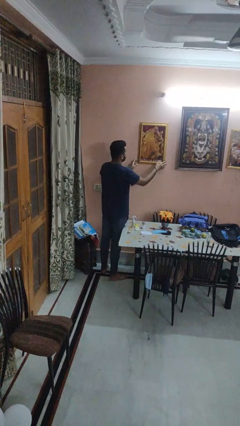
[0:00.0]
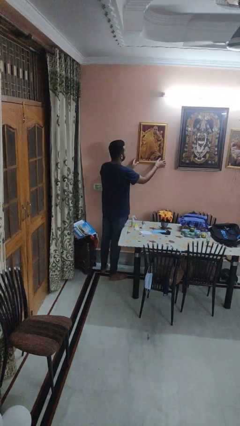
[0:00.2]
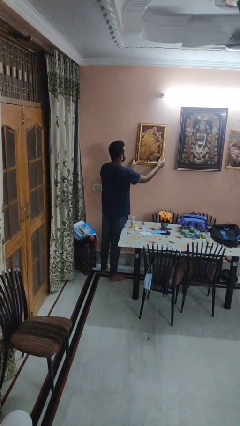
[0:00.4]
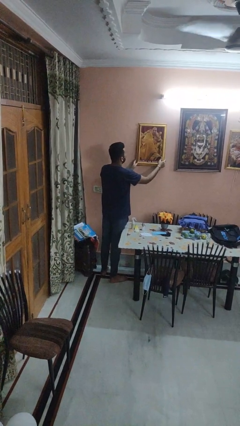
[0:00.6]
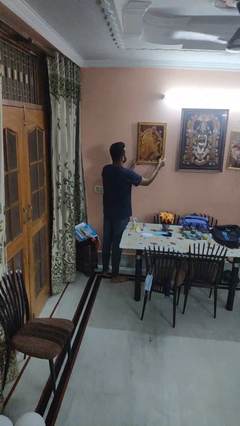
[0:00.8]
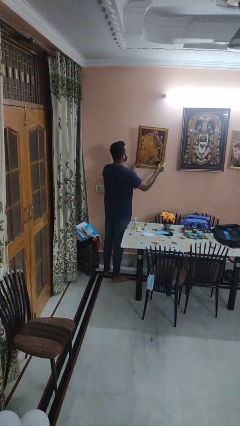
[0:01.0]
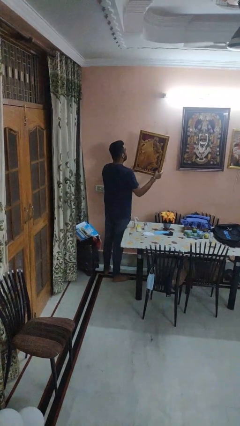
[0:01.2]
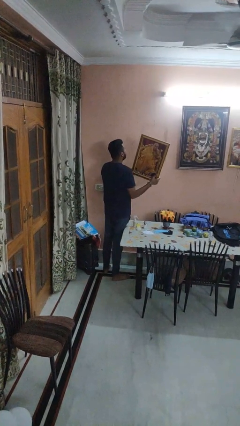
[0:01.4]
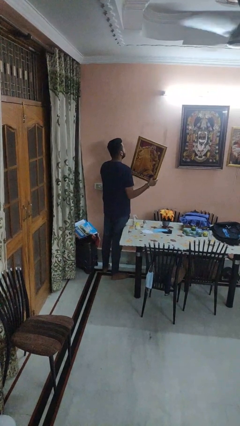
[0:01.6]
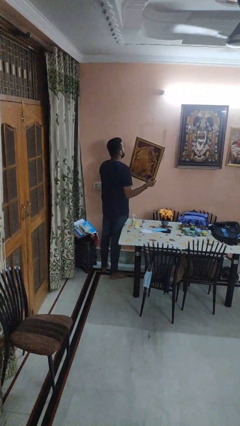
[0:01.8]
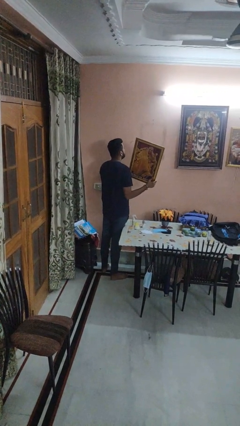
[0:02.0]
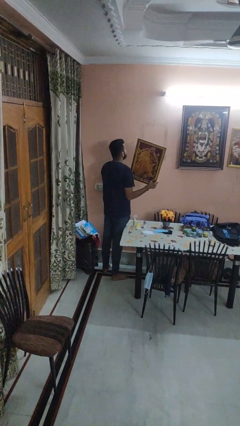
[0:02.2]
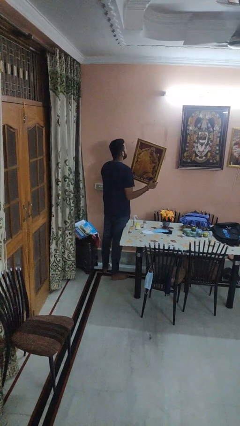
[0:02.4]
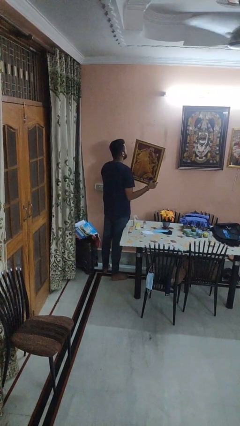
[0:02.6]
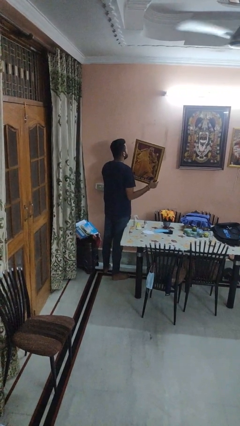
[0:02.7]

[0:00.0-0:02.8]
person takes down picture frame

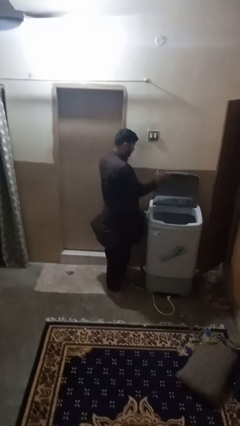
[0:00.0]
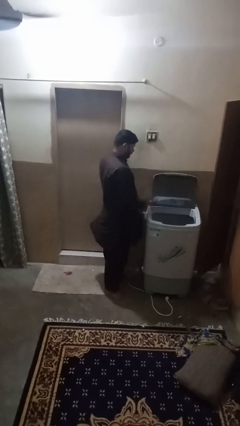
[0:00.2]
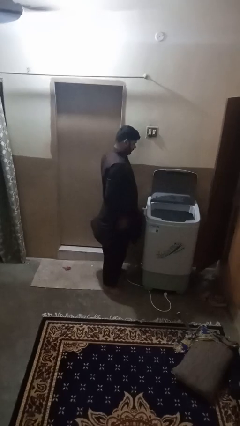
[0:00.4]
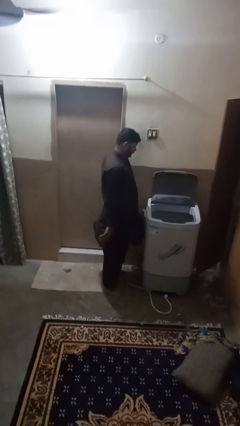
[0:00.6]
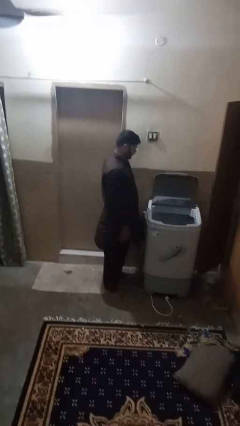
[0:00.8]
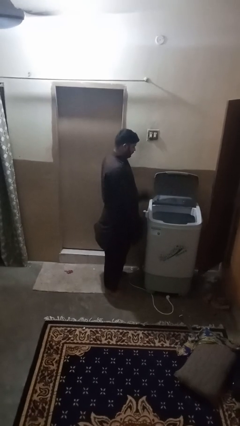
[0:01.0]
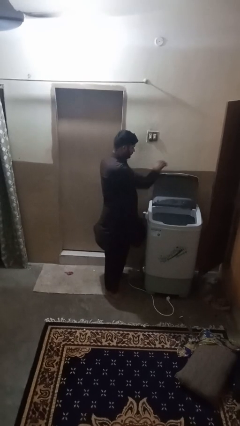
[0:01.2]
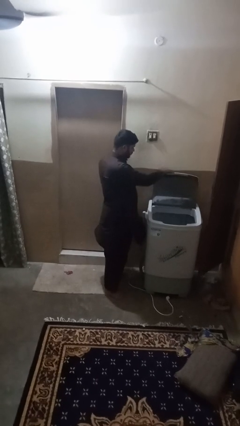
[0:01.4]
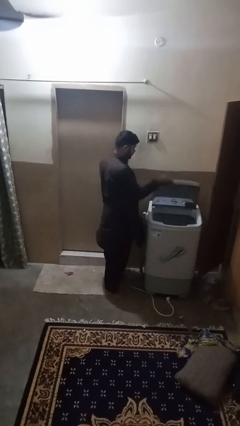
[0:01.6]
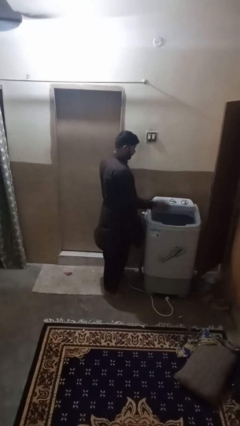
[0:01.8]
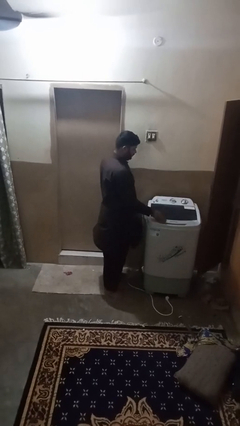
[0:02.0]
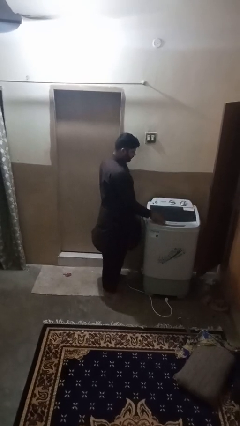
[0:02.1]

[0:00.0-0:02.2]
person closes clothes washer

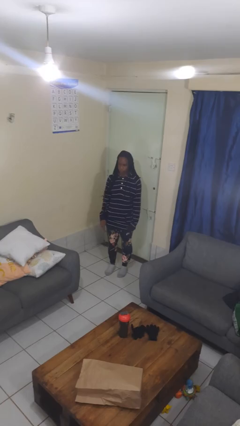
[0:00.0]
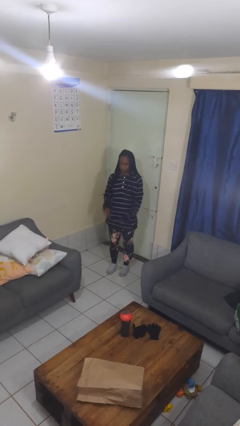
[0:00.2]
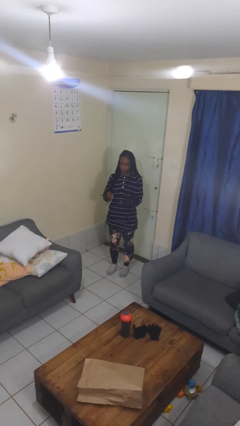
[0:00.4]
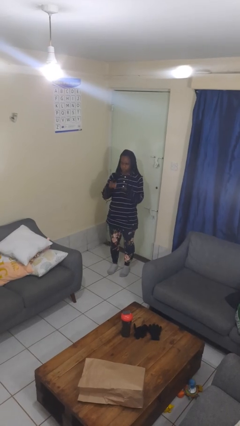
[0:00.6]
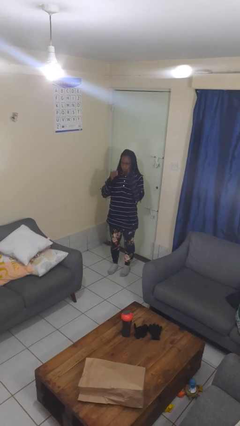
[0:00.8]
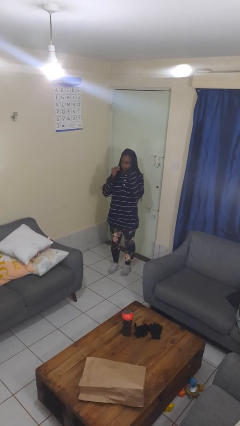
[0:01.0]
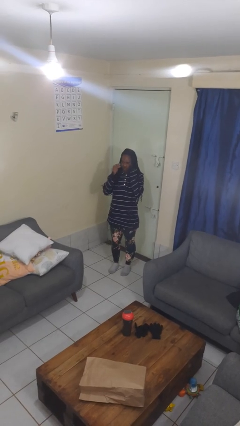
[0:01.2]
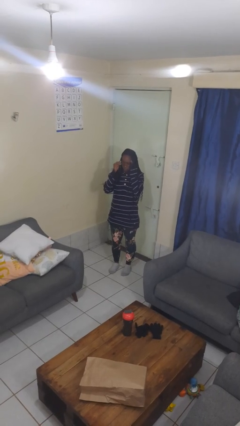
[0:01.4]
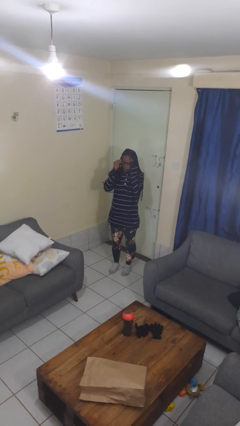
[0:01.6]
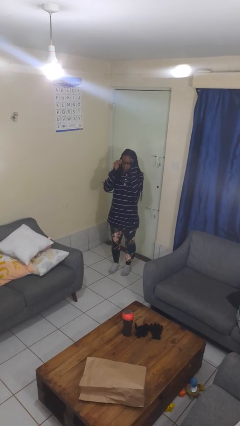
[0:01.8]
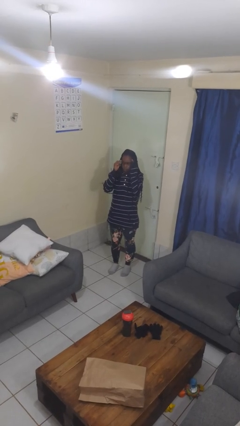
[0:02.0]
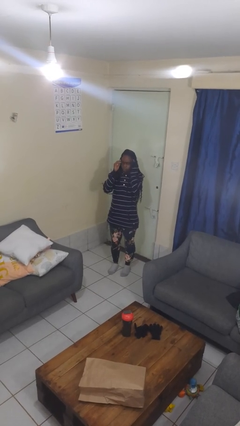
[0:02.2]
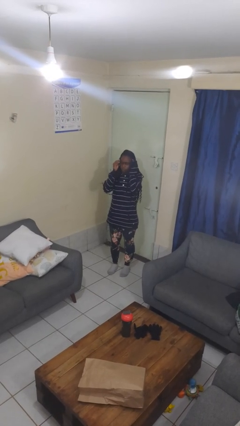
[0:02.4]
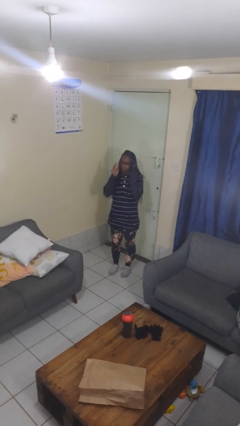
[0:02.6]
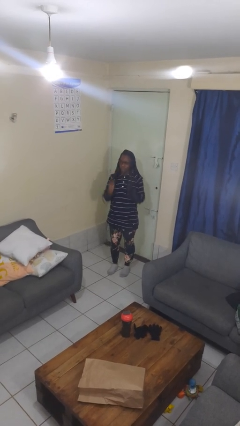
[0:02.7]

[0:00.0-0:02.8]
person puts on glasses

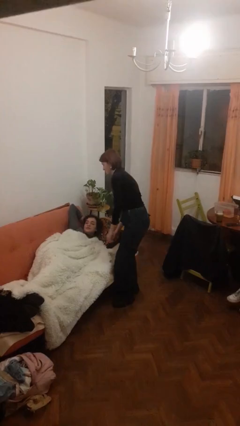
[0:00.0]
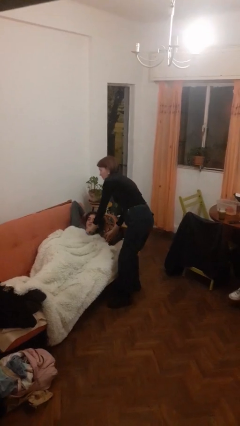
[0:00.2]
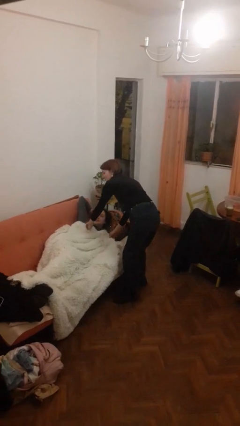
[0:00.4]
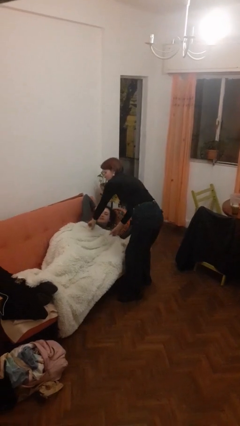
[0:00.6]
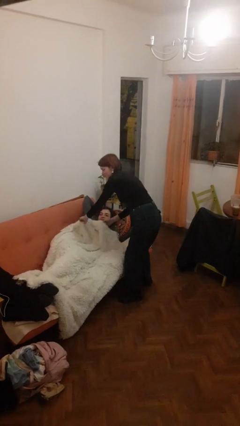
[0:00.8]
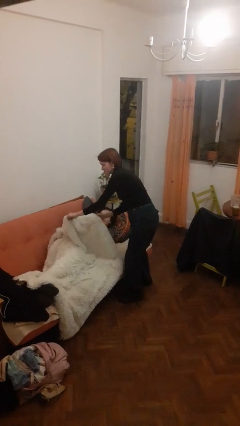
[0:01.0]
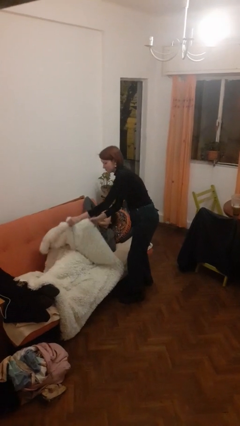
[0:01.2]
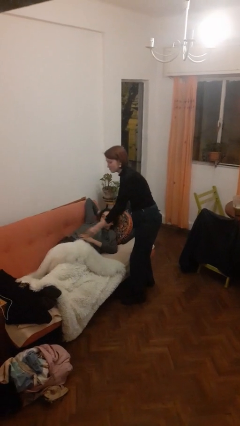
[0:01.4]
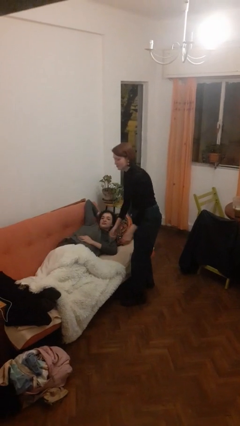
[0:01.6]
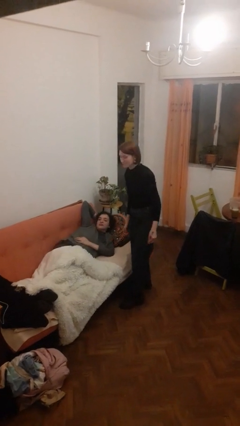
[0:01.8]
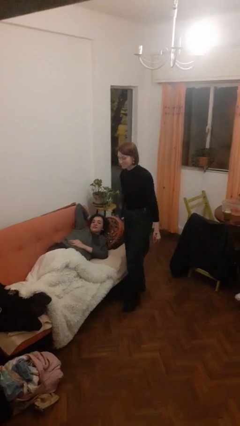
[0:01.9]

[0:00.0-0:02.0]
person uncovers friend with blanket

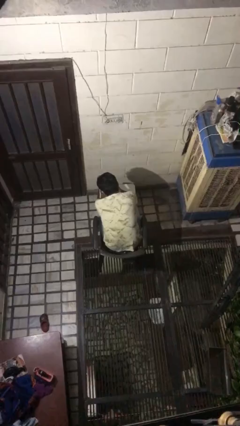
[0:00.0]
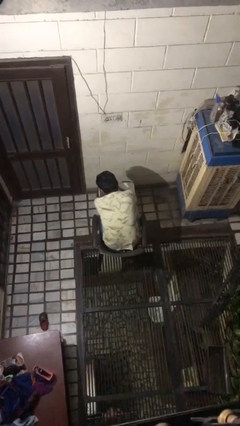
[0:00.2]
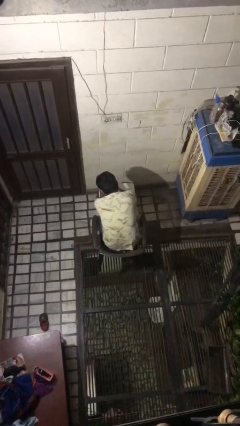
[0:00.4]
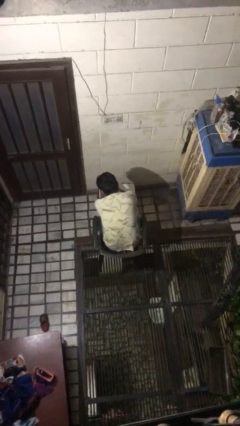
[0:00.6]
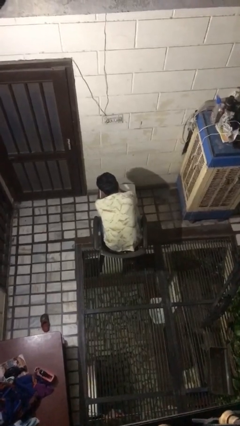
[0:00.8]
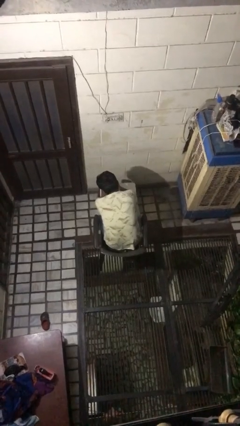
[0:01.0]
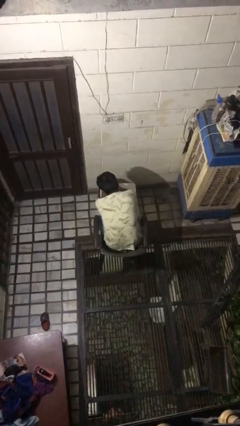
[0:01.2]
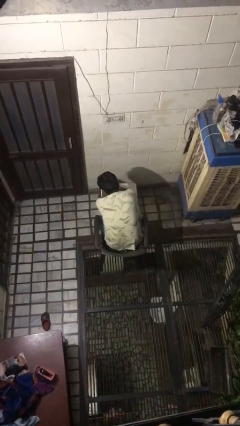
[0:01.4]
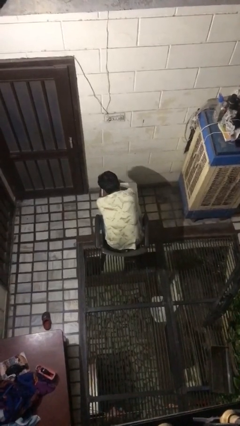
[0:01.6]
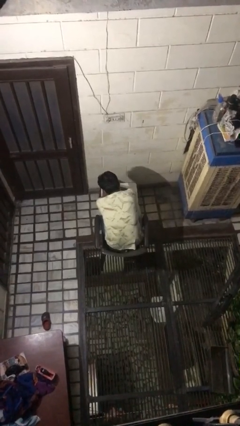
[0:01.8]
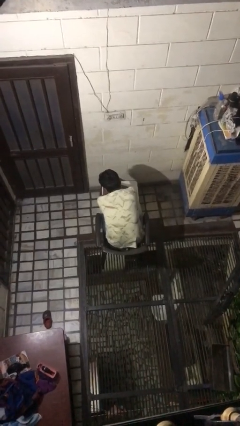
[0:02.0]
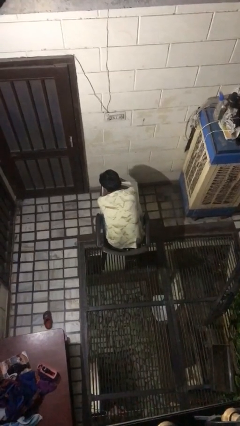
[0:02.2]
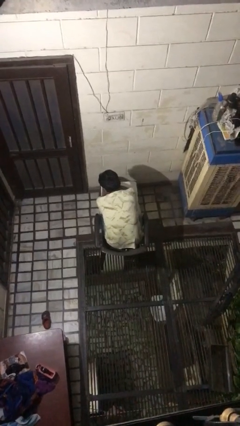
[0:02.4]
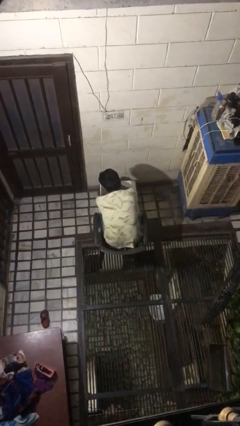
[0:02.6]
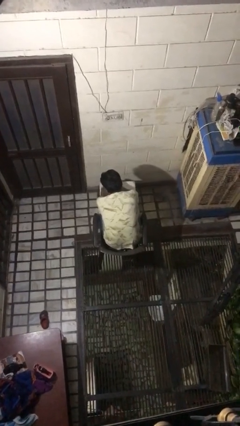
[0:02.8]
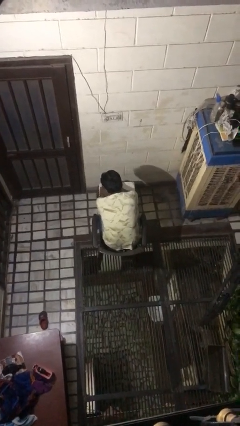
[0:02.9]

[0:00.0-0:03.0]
person paints fingernails

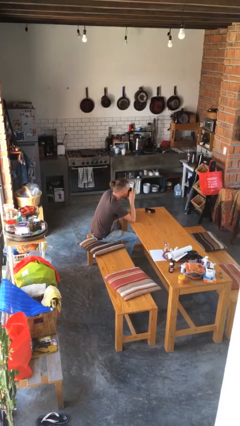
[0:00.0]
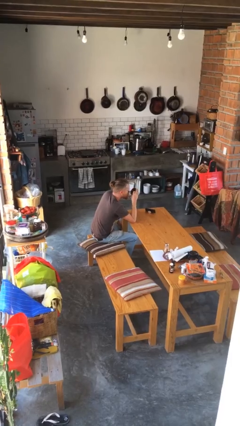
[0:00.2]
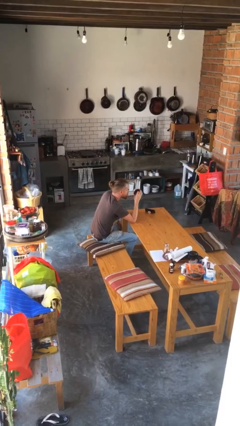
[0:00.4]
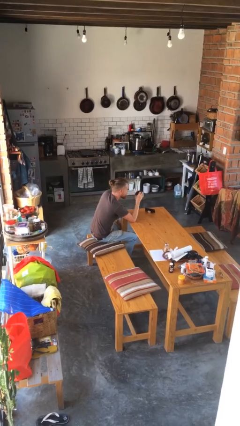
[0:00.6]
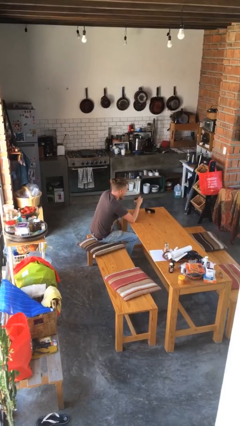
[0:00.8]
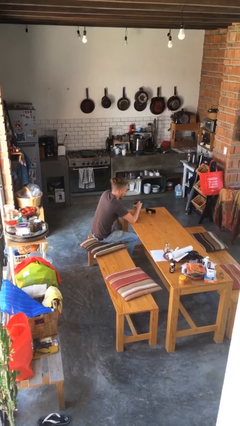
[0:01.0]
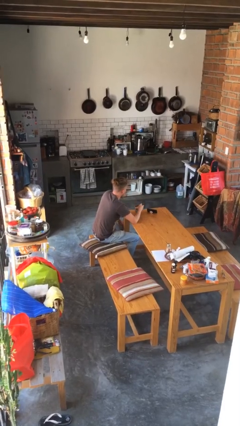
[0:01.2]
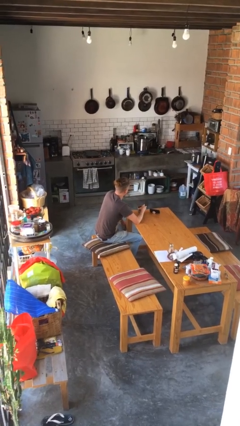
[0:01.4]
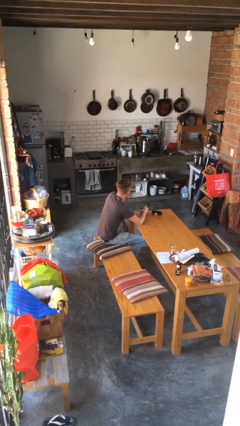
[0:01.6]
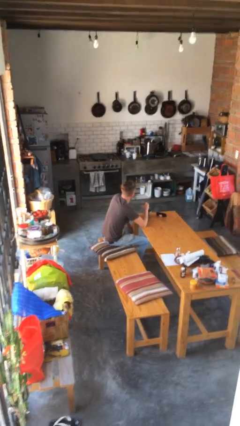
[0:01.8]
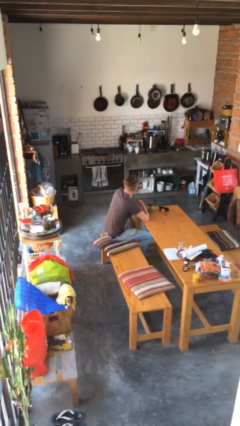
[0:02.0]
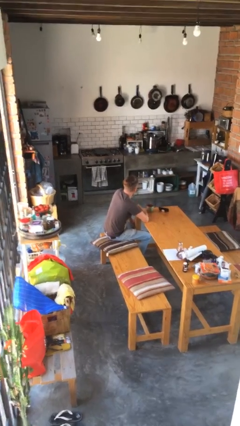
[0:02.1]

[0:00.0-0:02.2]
person puts down object on table

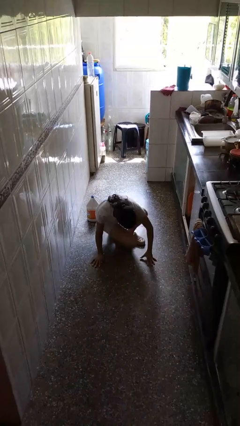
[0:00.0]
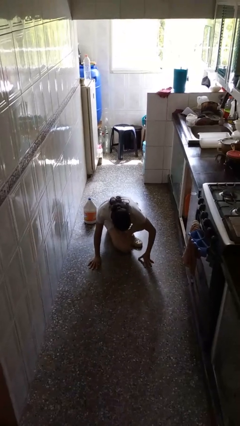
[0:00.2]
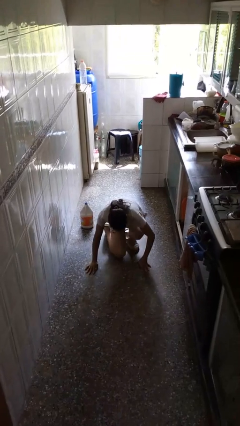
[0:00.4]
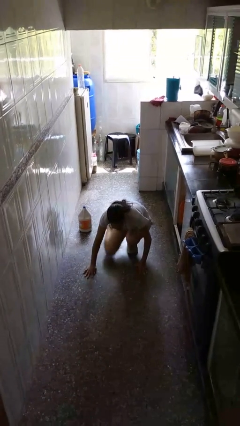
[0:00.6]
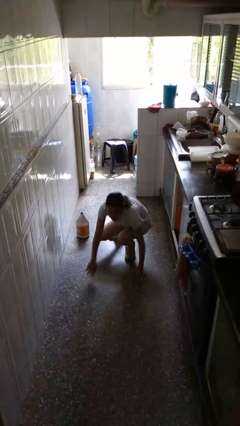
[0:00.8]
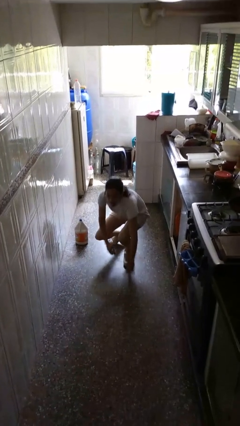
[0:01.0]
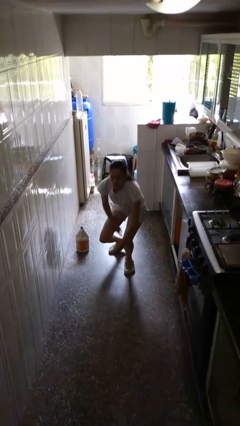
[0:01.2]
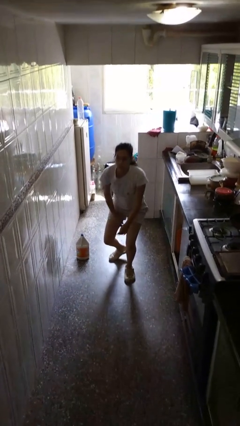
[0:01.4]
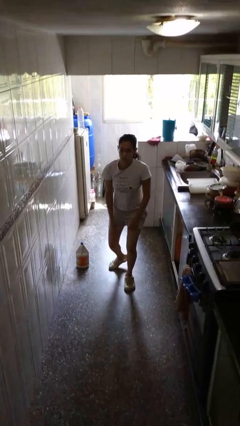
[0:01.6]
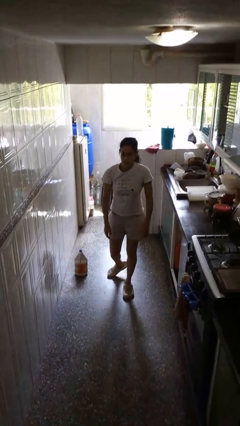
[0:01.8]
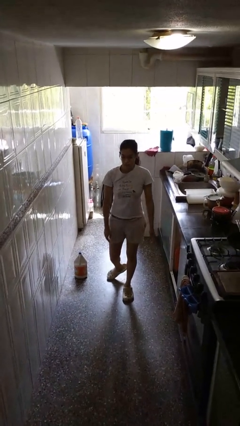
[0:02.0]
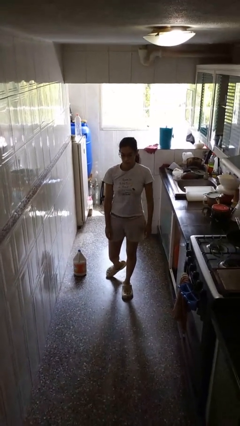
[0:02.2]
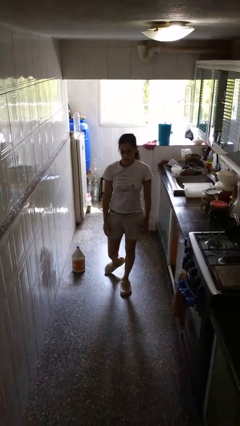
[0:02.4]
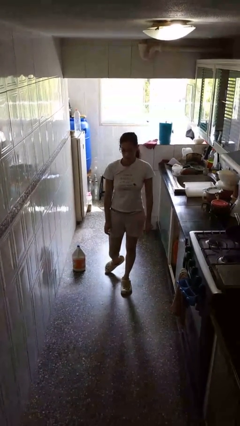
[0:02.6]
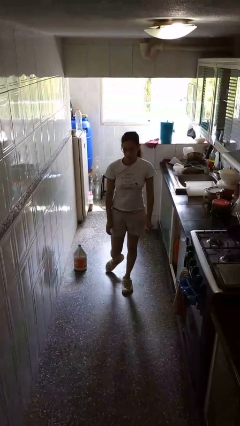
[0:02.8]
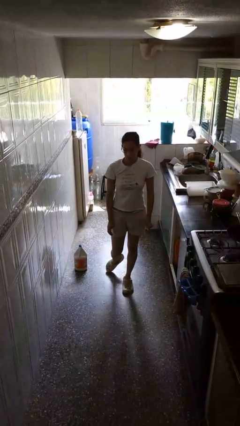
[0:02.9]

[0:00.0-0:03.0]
person stands up from floor
